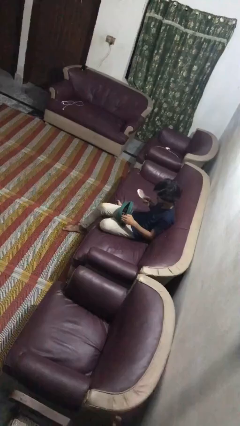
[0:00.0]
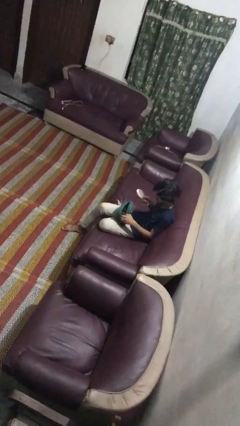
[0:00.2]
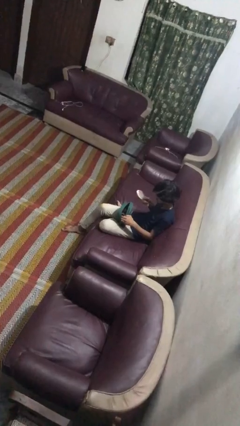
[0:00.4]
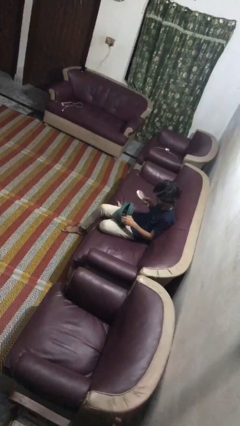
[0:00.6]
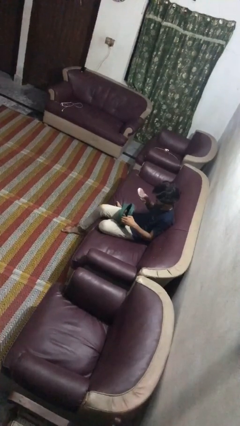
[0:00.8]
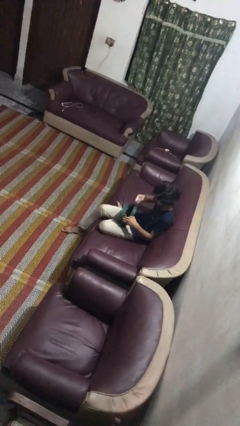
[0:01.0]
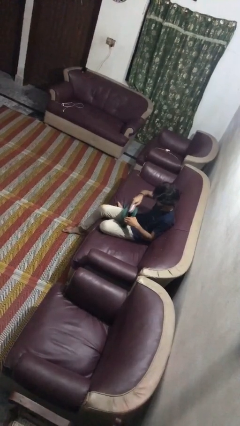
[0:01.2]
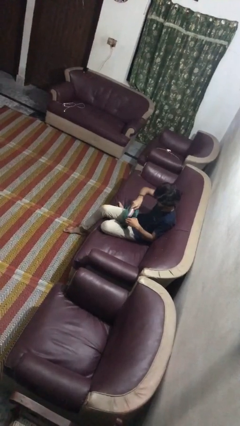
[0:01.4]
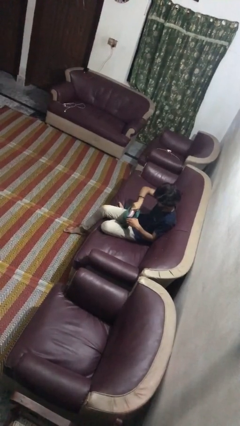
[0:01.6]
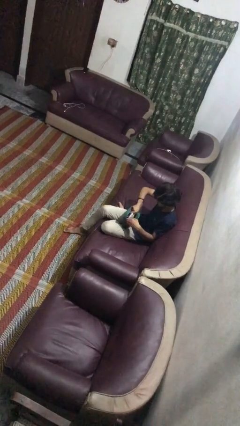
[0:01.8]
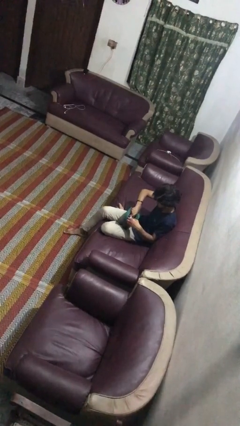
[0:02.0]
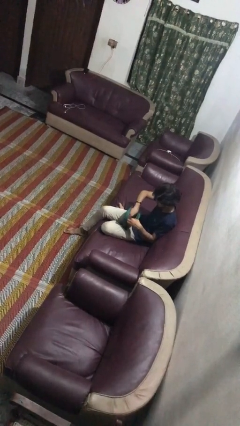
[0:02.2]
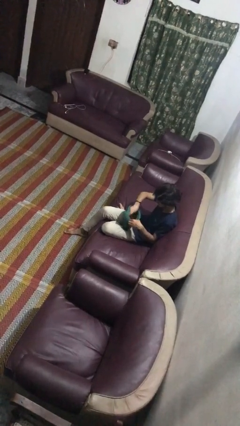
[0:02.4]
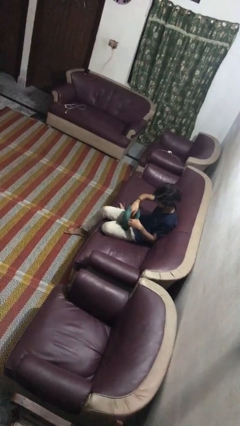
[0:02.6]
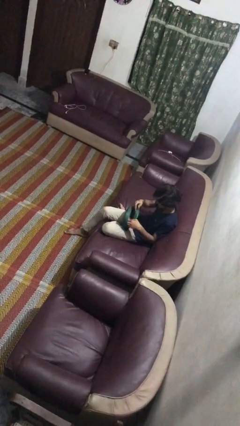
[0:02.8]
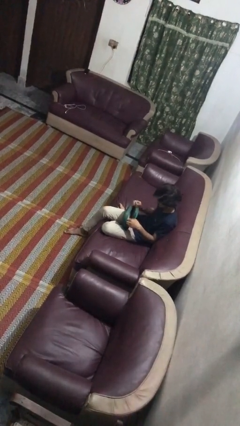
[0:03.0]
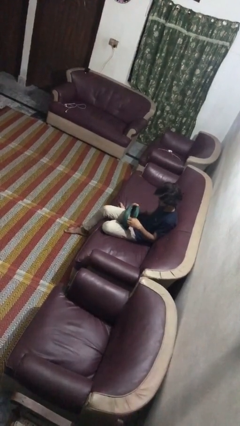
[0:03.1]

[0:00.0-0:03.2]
person puts object into purse

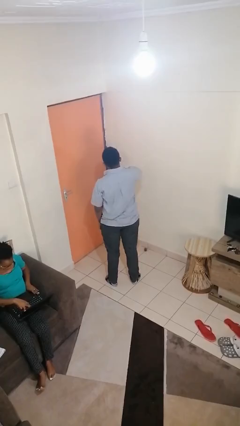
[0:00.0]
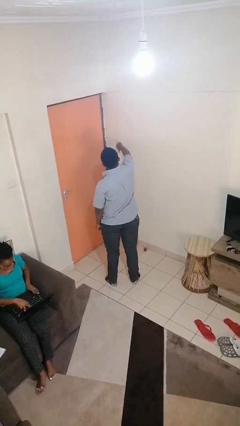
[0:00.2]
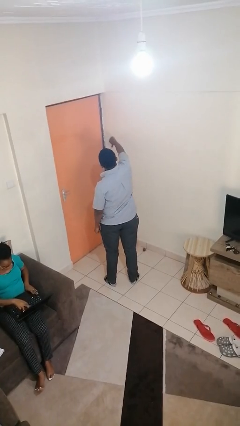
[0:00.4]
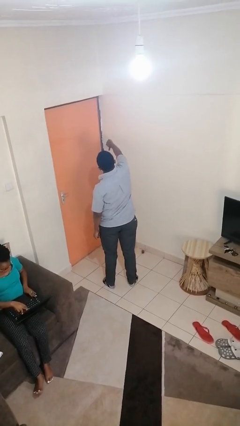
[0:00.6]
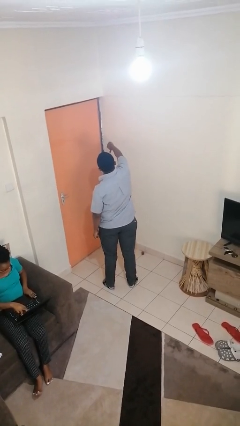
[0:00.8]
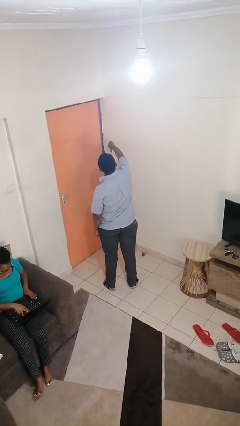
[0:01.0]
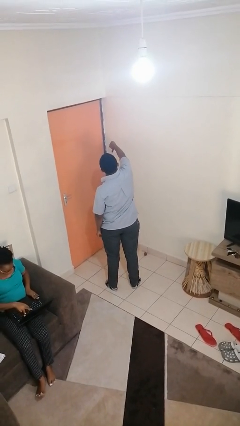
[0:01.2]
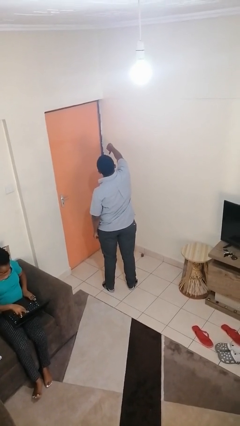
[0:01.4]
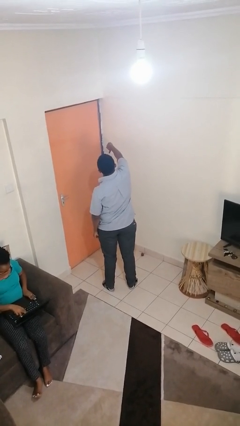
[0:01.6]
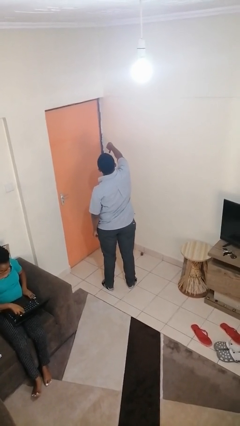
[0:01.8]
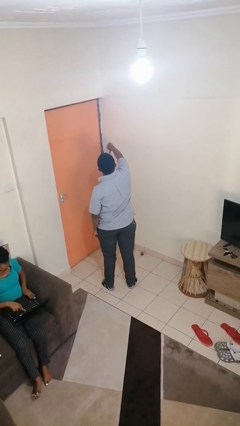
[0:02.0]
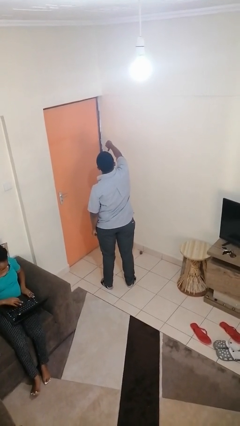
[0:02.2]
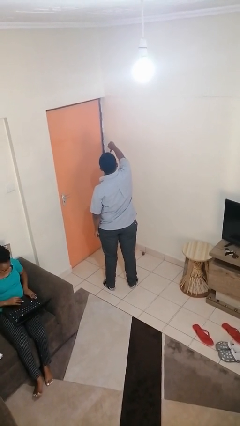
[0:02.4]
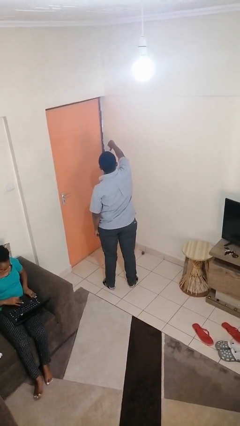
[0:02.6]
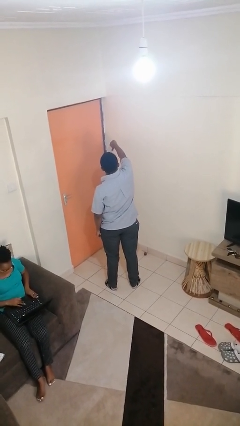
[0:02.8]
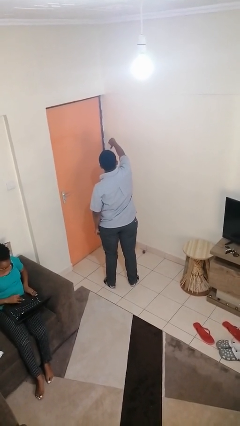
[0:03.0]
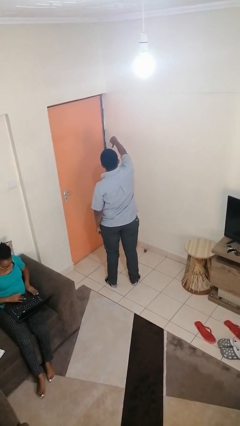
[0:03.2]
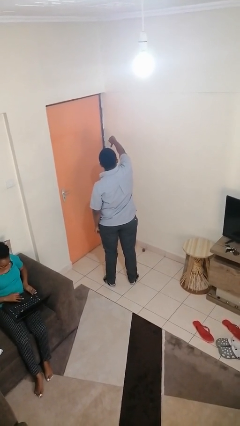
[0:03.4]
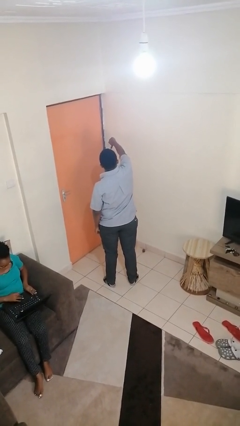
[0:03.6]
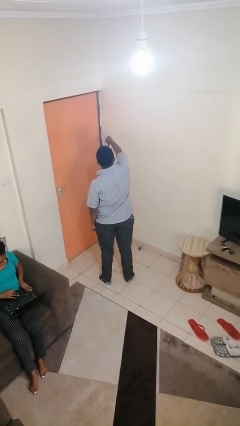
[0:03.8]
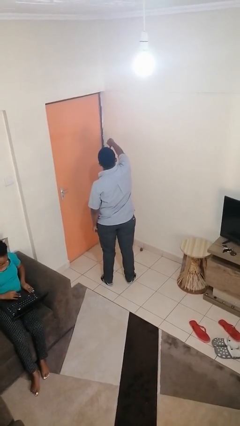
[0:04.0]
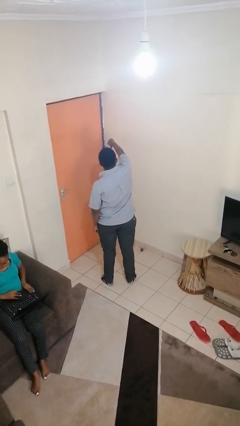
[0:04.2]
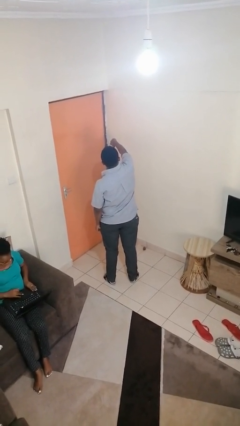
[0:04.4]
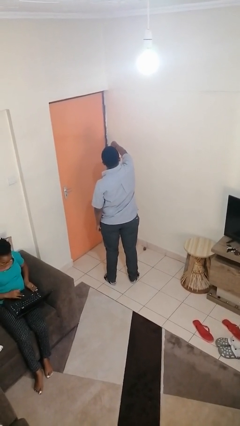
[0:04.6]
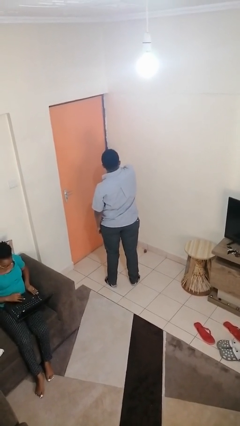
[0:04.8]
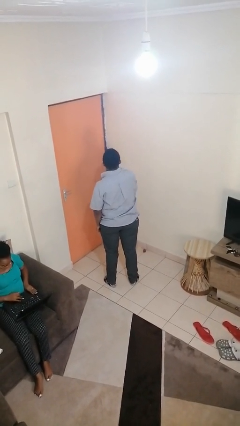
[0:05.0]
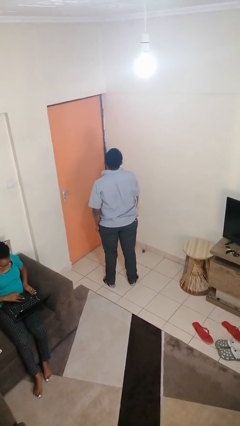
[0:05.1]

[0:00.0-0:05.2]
person gestures thumbs down

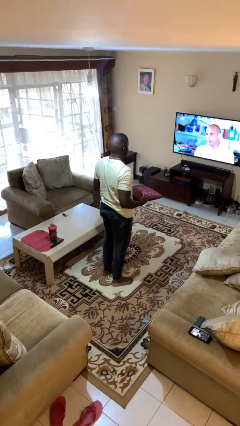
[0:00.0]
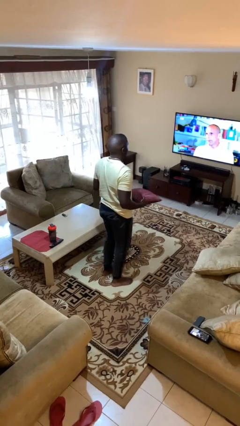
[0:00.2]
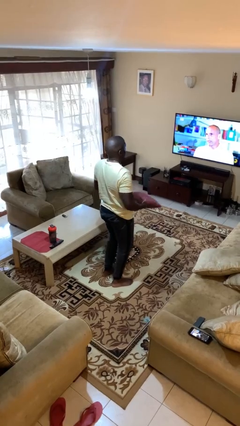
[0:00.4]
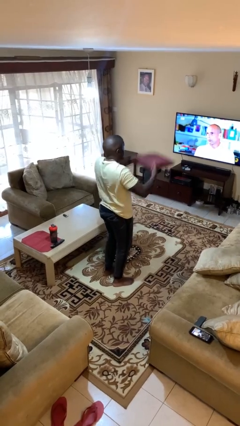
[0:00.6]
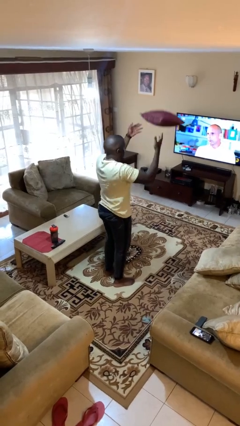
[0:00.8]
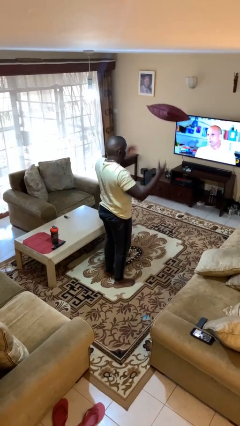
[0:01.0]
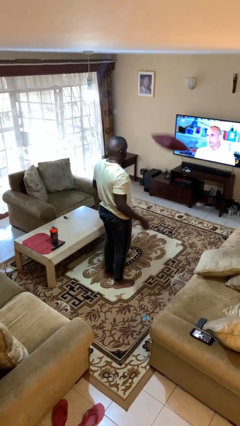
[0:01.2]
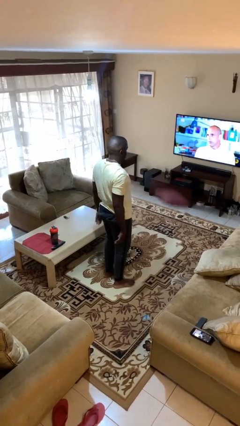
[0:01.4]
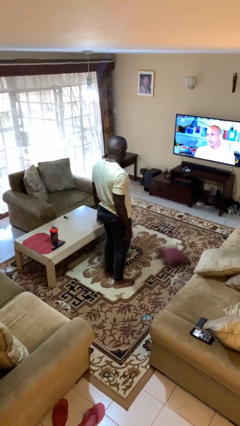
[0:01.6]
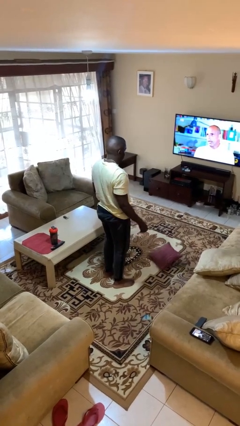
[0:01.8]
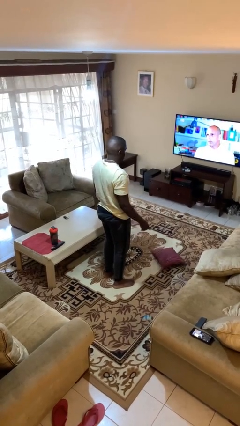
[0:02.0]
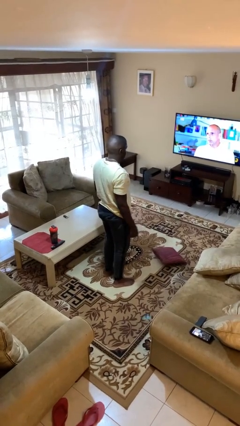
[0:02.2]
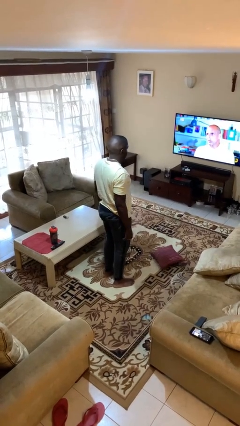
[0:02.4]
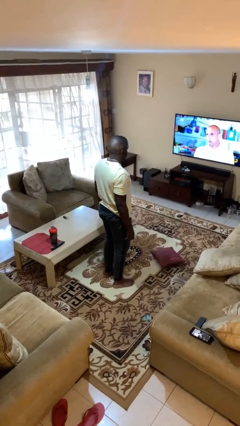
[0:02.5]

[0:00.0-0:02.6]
person throws object into air

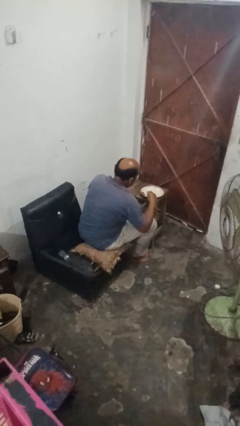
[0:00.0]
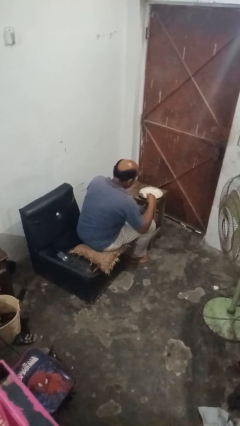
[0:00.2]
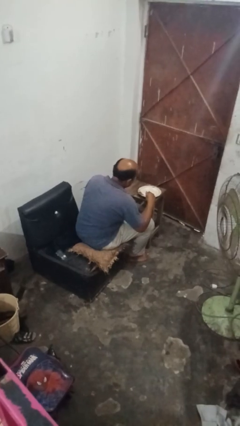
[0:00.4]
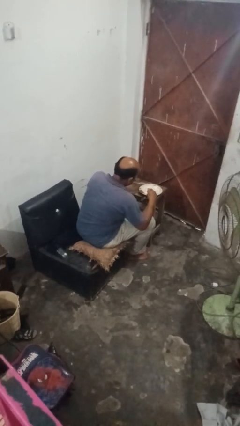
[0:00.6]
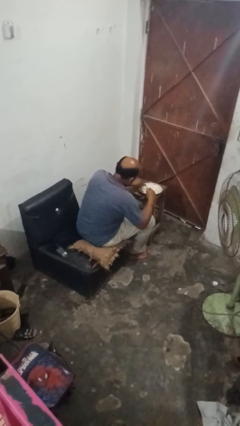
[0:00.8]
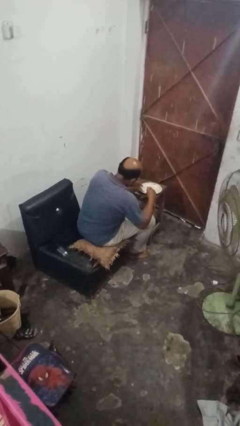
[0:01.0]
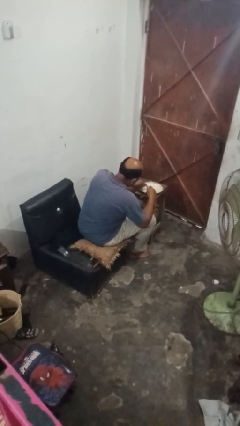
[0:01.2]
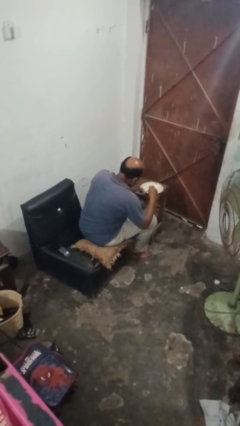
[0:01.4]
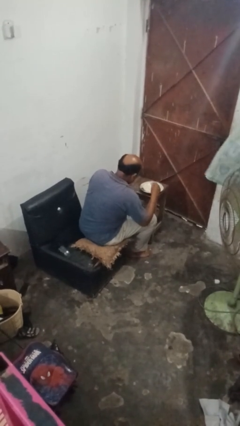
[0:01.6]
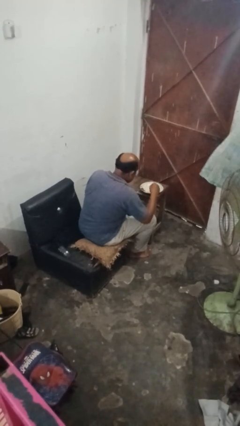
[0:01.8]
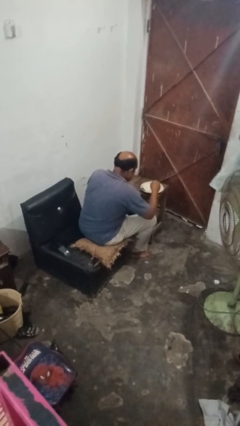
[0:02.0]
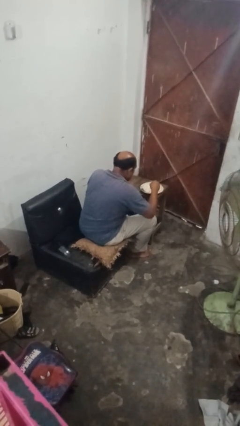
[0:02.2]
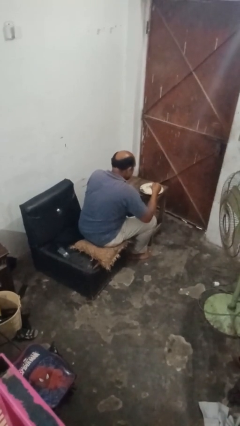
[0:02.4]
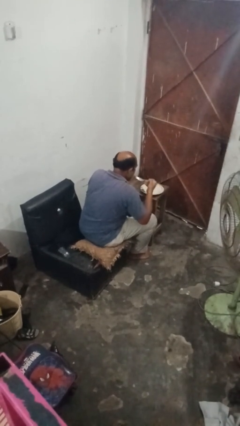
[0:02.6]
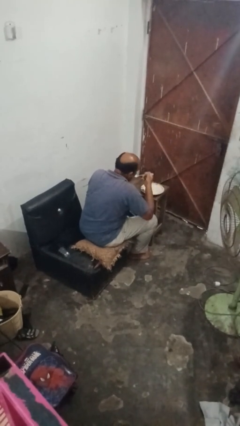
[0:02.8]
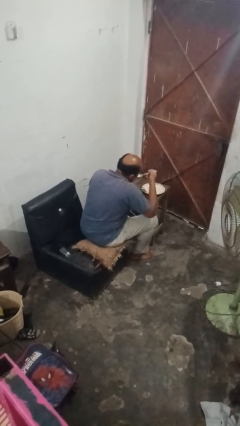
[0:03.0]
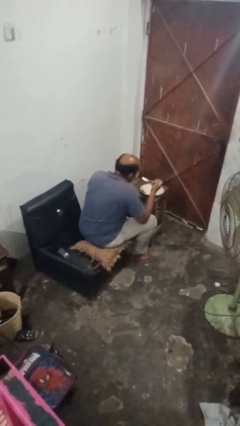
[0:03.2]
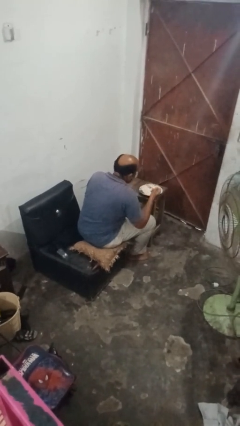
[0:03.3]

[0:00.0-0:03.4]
person eats with utensil

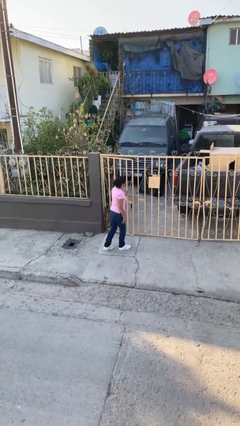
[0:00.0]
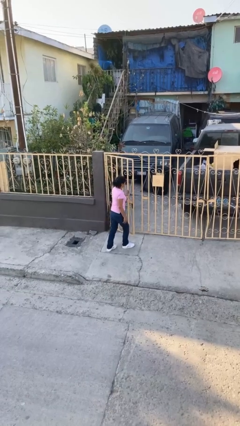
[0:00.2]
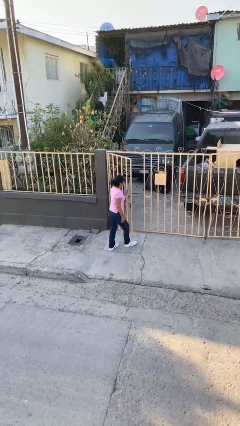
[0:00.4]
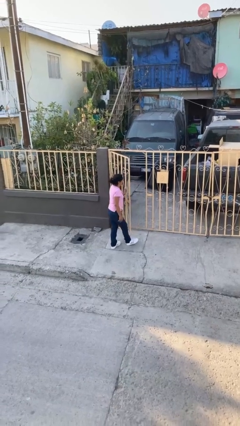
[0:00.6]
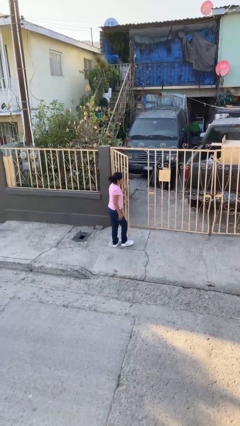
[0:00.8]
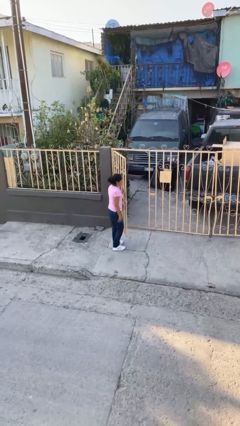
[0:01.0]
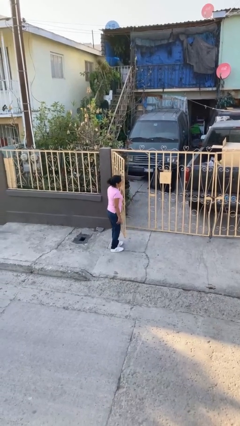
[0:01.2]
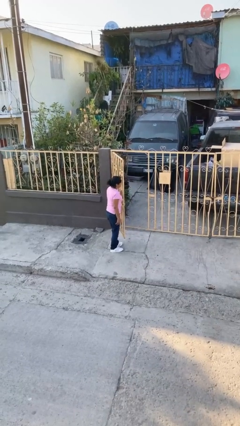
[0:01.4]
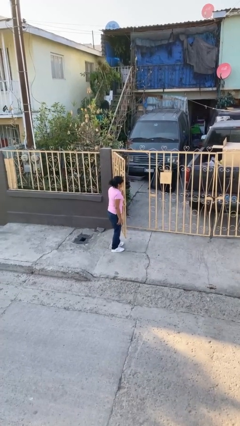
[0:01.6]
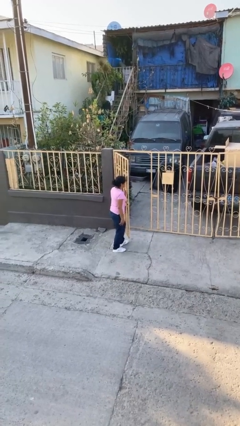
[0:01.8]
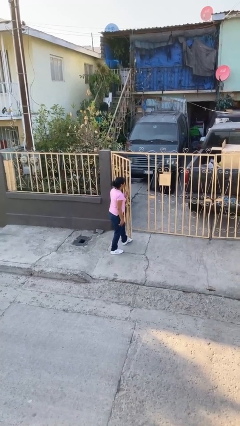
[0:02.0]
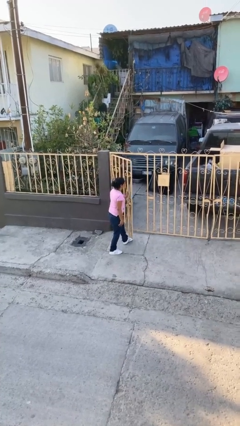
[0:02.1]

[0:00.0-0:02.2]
person opens facility door

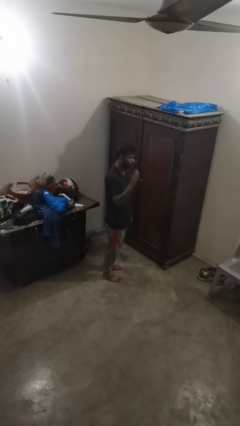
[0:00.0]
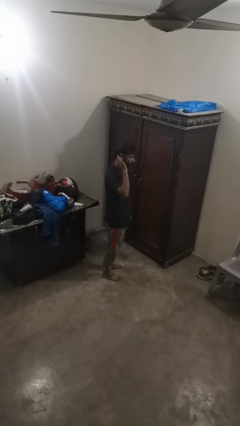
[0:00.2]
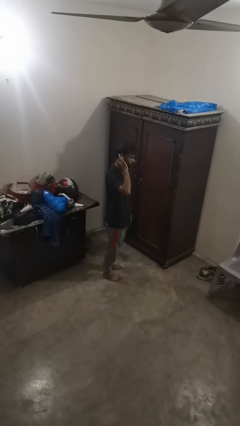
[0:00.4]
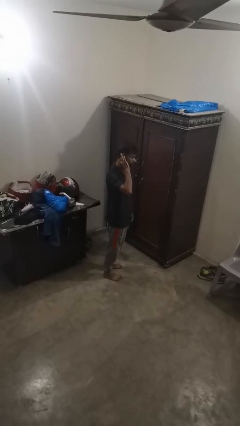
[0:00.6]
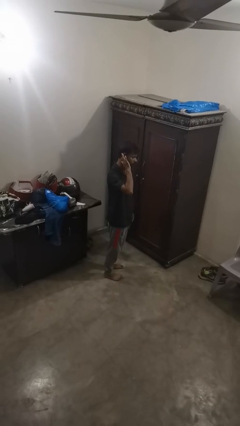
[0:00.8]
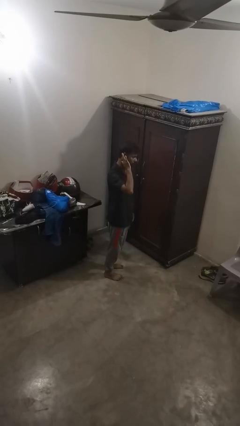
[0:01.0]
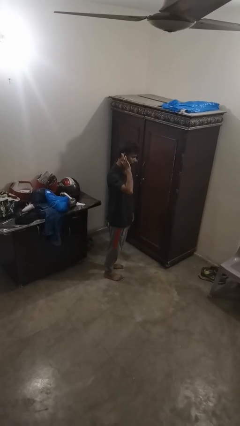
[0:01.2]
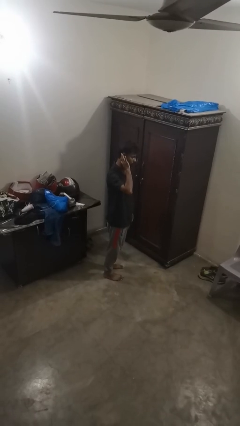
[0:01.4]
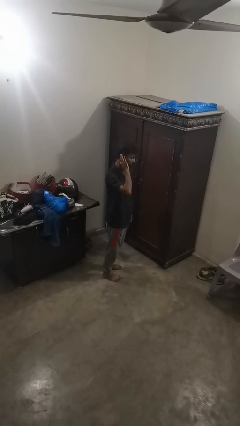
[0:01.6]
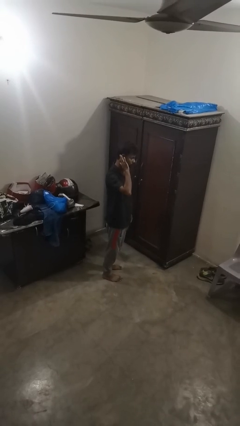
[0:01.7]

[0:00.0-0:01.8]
person gestures listen closely
